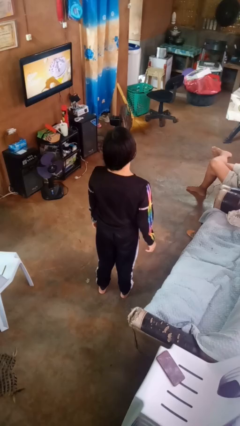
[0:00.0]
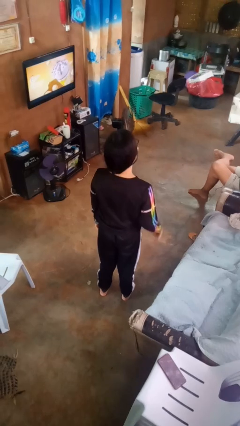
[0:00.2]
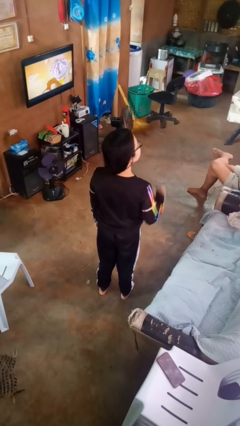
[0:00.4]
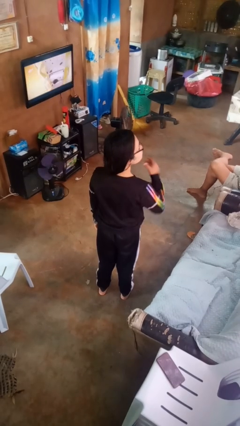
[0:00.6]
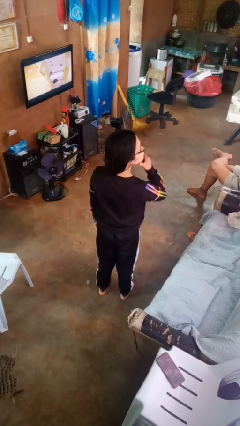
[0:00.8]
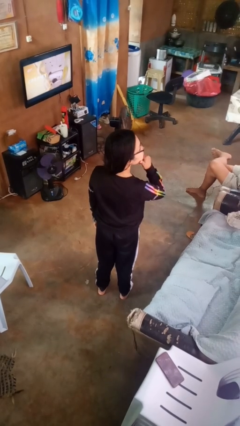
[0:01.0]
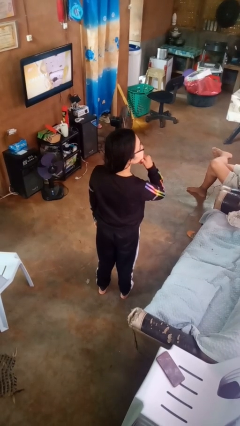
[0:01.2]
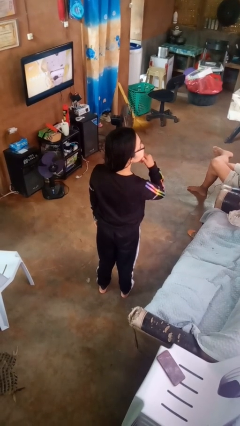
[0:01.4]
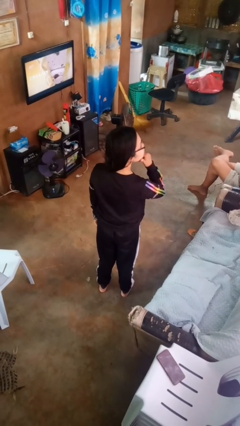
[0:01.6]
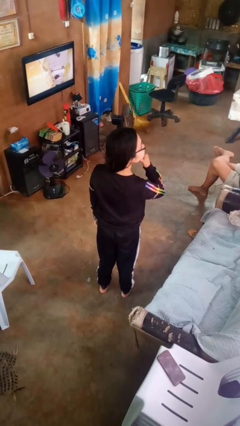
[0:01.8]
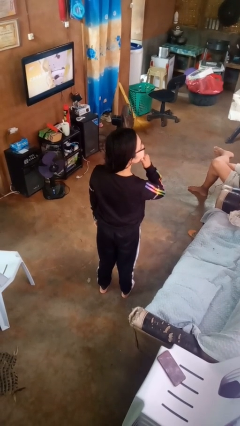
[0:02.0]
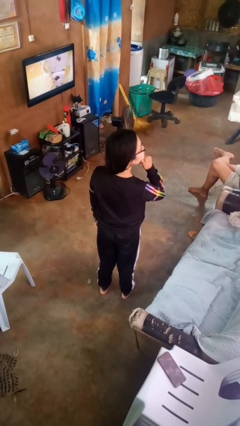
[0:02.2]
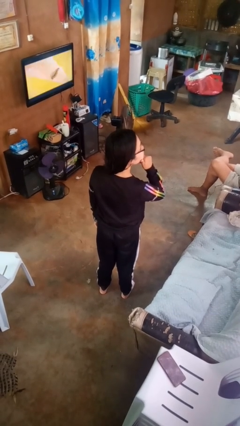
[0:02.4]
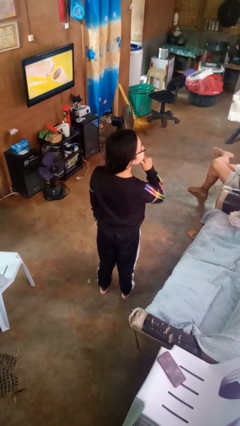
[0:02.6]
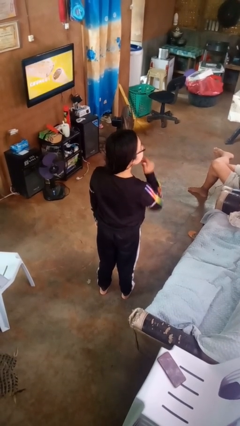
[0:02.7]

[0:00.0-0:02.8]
person strokes chin

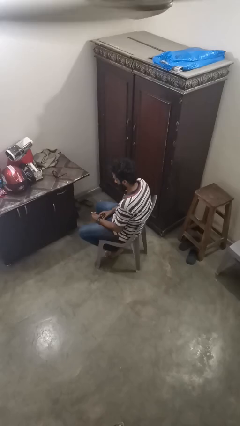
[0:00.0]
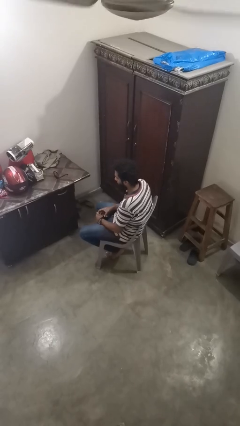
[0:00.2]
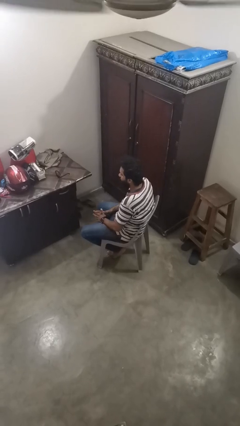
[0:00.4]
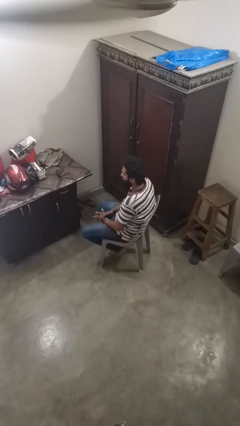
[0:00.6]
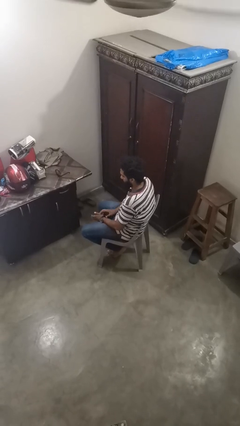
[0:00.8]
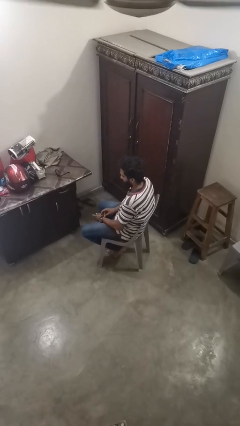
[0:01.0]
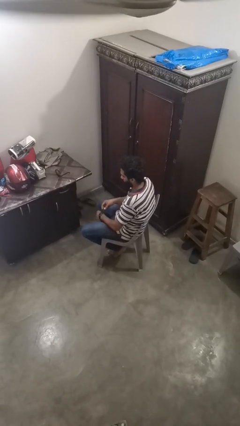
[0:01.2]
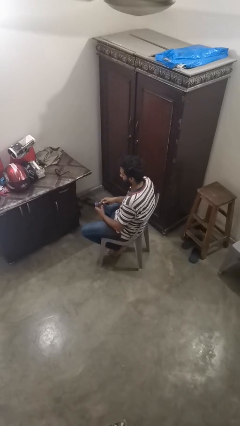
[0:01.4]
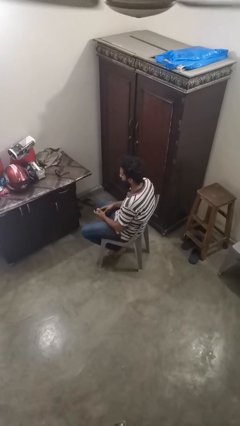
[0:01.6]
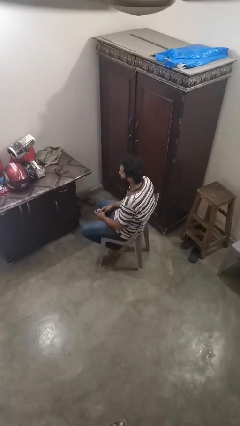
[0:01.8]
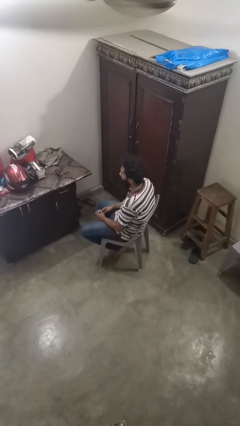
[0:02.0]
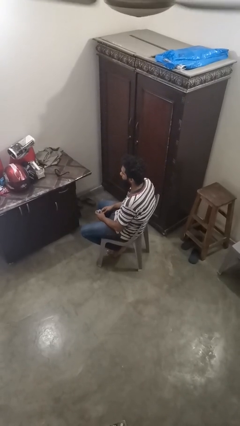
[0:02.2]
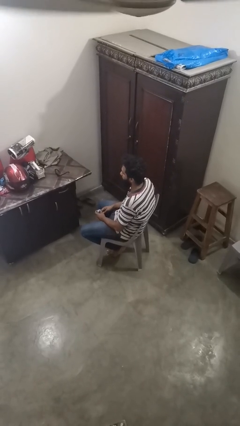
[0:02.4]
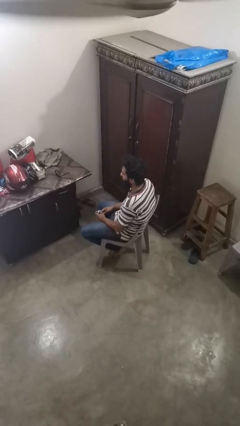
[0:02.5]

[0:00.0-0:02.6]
person takes off wristwatch

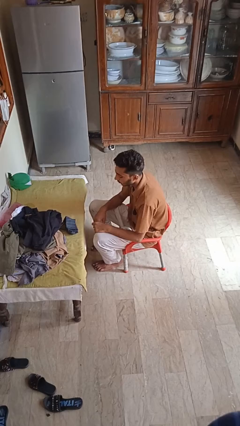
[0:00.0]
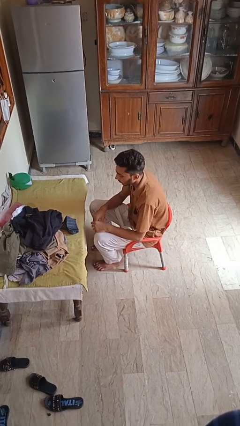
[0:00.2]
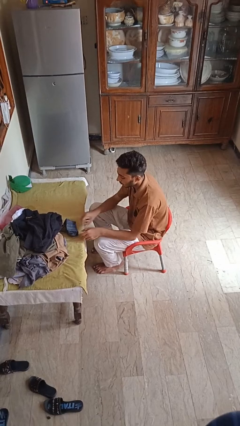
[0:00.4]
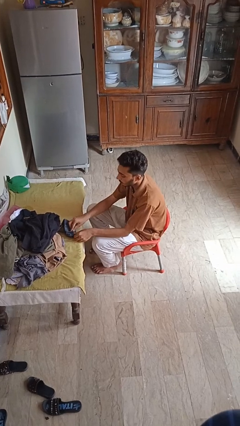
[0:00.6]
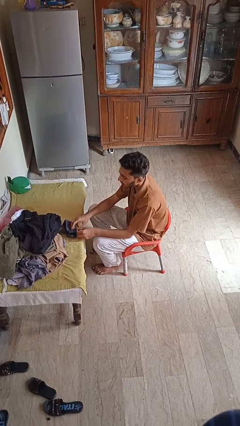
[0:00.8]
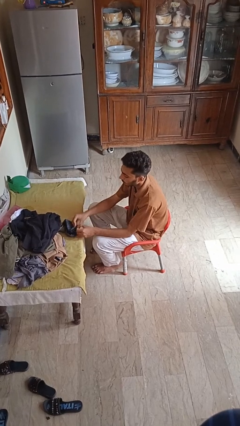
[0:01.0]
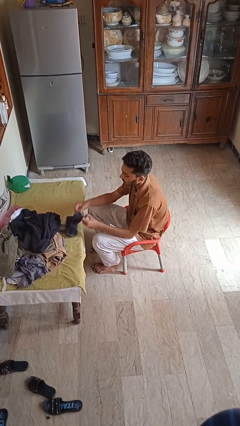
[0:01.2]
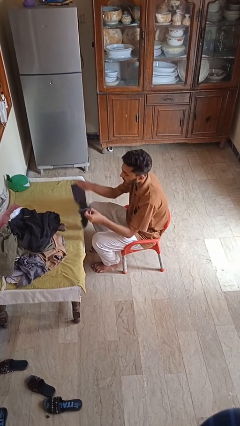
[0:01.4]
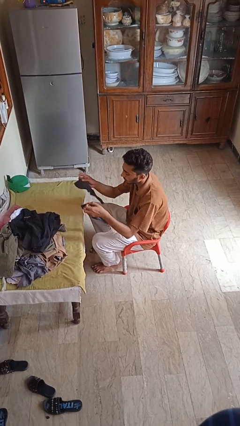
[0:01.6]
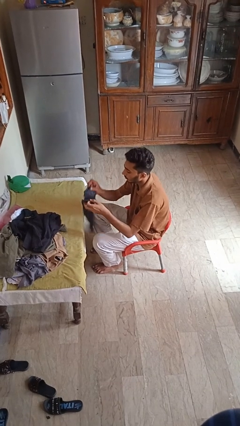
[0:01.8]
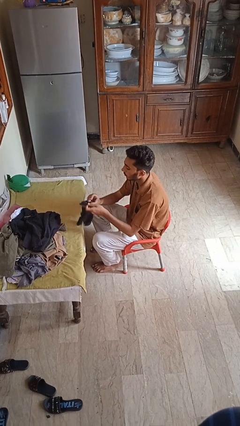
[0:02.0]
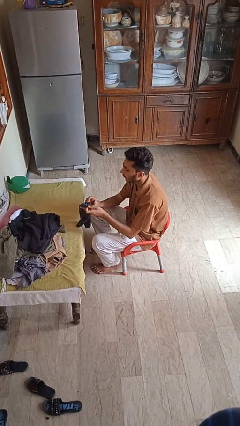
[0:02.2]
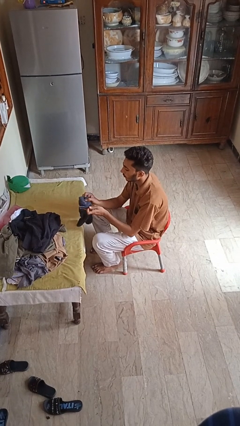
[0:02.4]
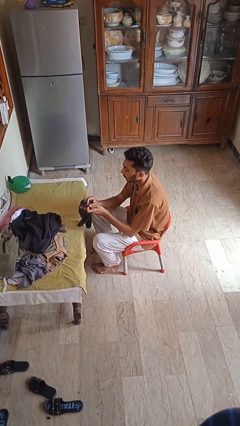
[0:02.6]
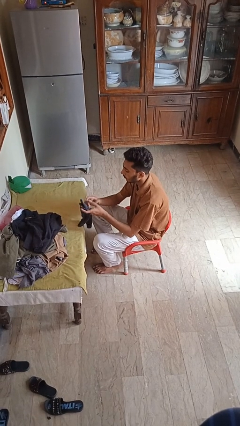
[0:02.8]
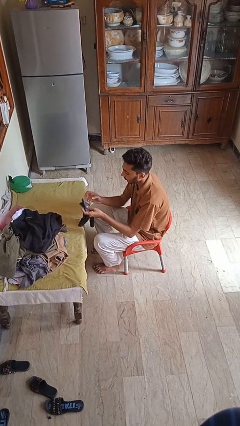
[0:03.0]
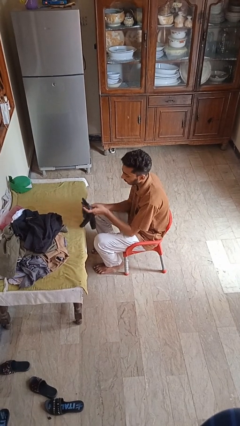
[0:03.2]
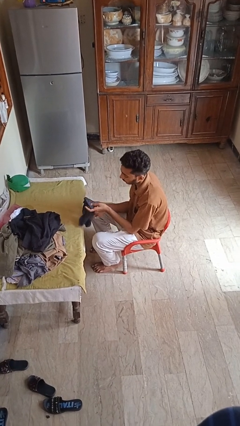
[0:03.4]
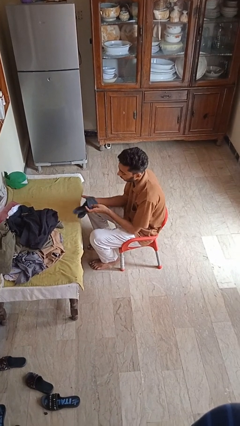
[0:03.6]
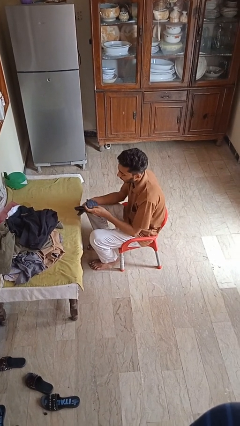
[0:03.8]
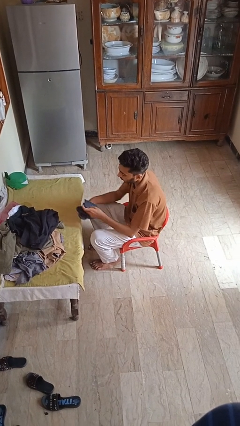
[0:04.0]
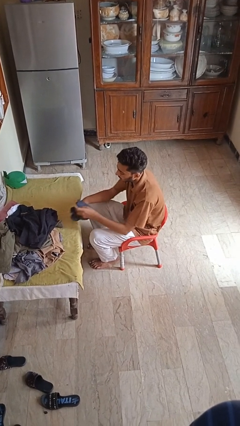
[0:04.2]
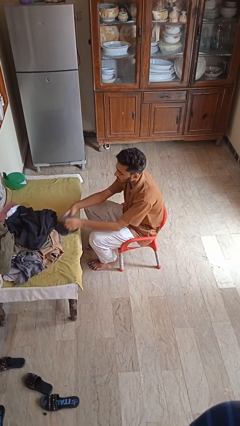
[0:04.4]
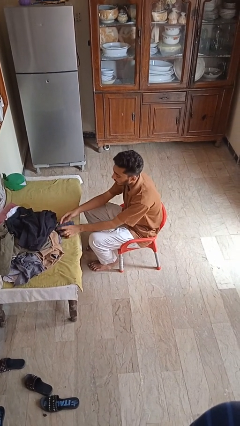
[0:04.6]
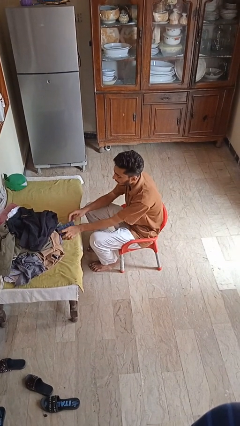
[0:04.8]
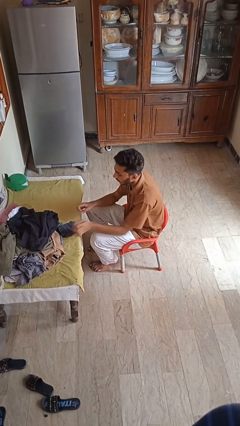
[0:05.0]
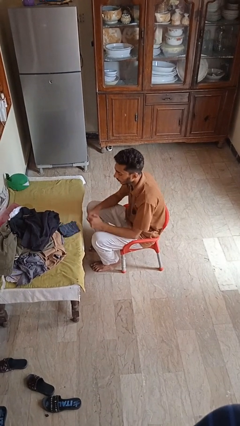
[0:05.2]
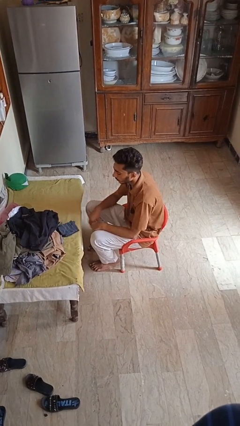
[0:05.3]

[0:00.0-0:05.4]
person folds socks

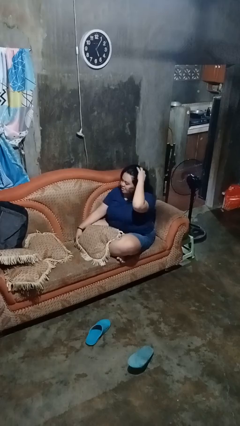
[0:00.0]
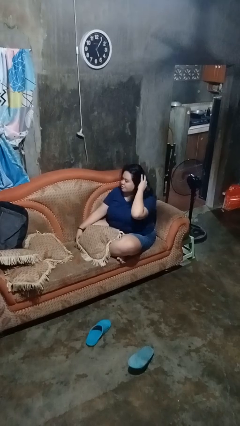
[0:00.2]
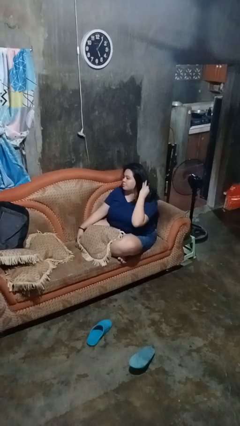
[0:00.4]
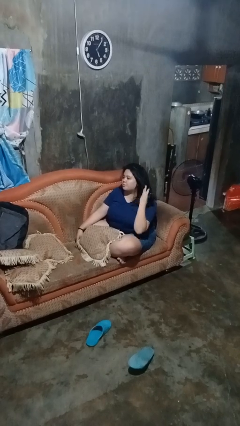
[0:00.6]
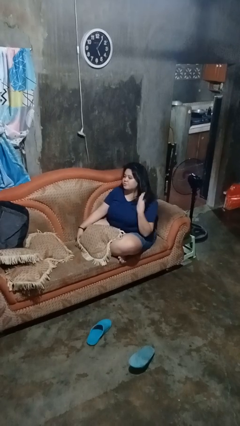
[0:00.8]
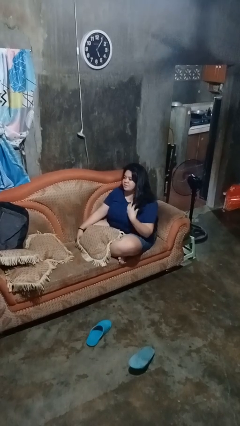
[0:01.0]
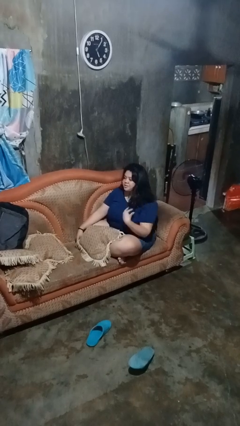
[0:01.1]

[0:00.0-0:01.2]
person strokes hair

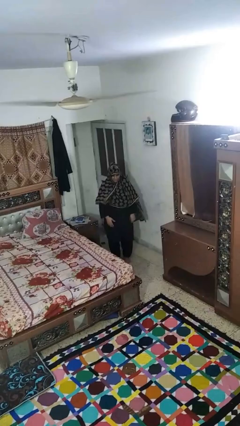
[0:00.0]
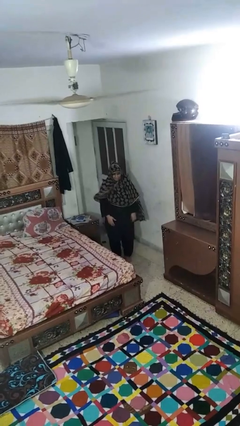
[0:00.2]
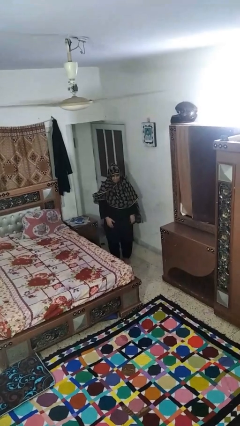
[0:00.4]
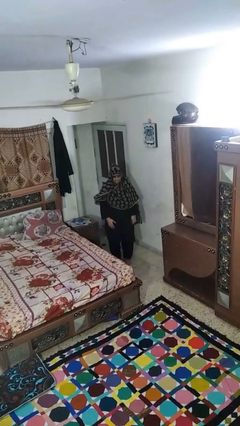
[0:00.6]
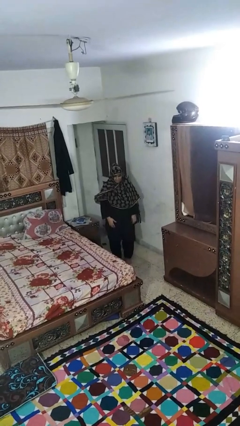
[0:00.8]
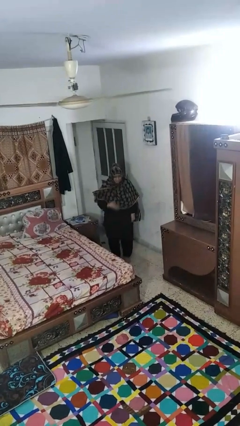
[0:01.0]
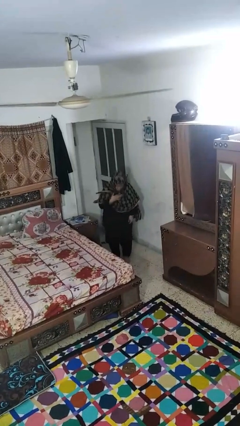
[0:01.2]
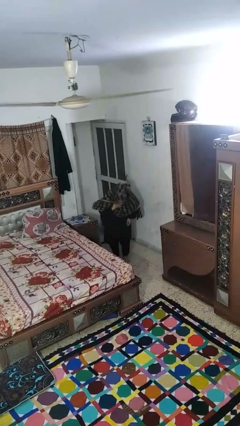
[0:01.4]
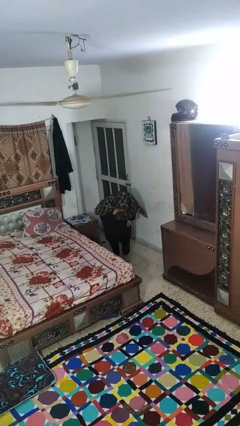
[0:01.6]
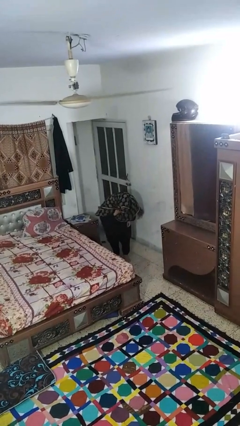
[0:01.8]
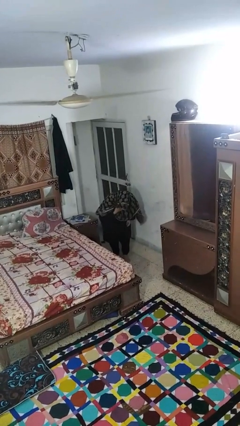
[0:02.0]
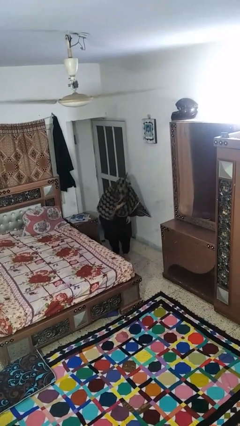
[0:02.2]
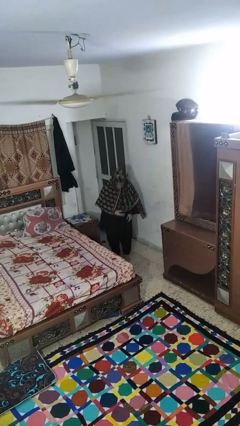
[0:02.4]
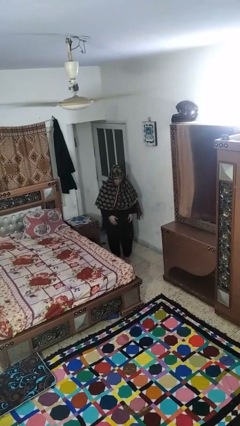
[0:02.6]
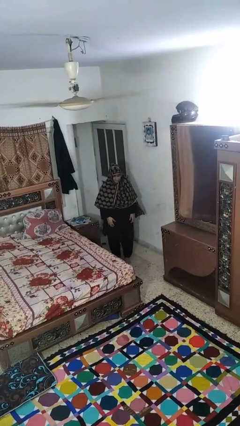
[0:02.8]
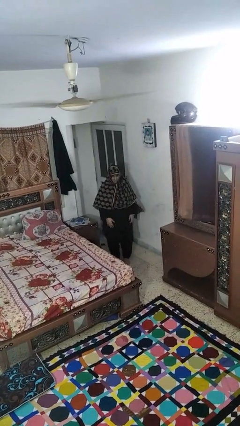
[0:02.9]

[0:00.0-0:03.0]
person bows

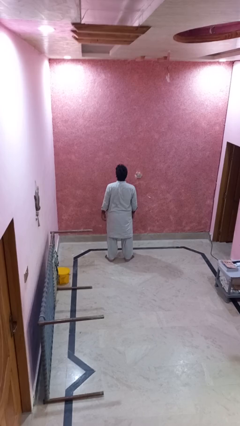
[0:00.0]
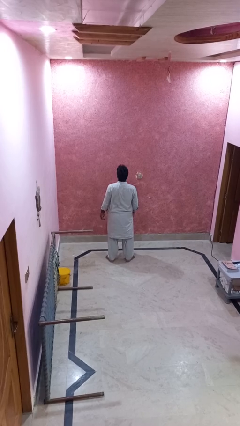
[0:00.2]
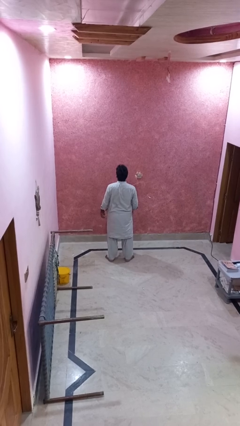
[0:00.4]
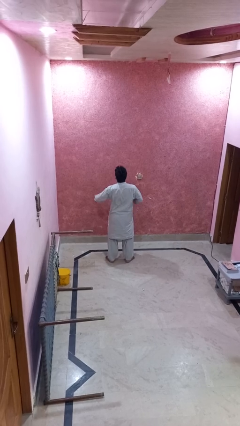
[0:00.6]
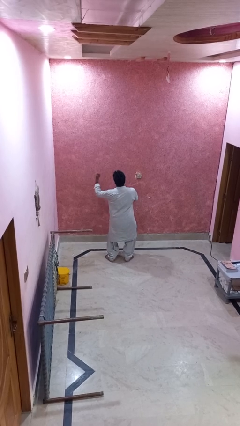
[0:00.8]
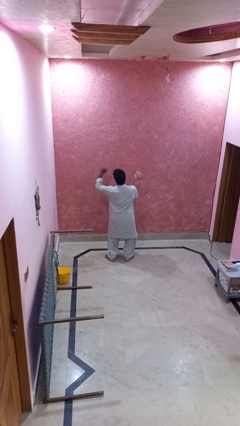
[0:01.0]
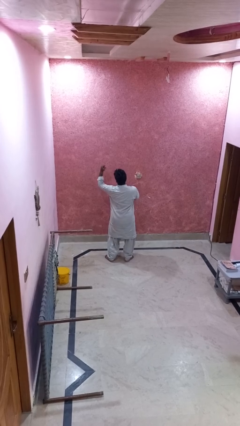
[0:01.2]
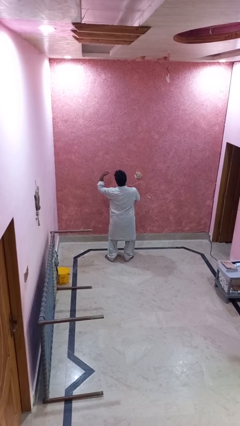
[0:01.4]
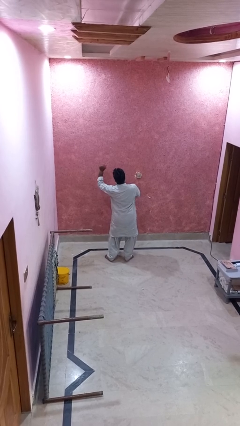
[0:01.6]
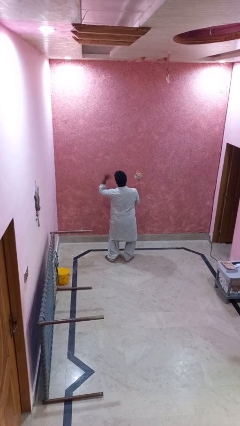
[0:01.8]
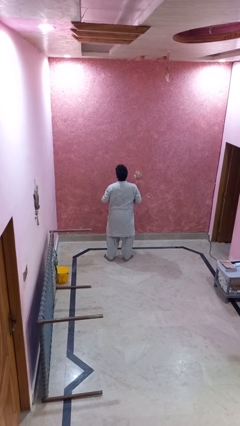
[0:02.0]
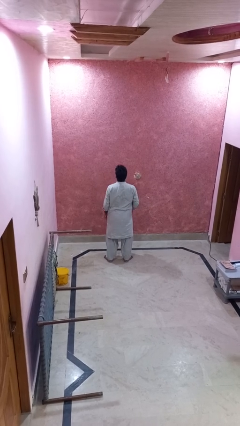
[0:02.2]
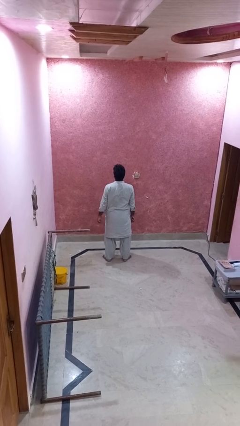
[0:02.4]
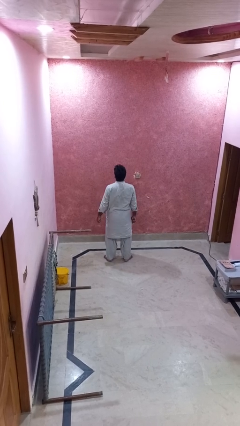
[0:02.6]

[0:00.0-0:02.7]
person dances in place
